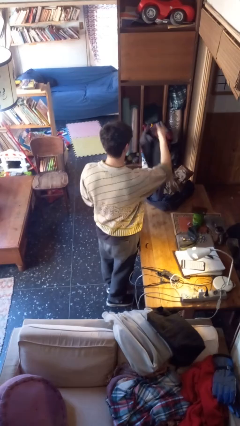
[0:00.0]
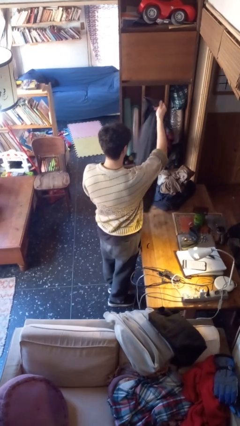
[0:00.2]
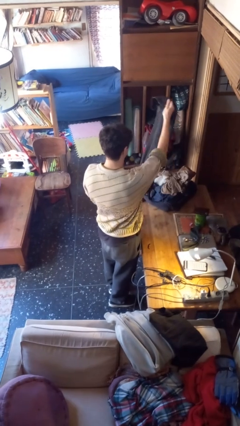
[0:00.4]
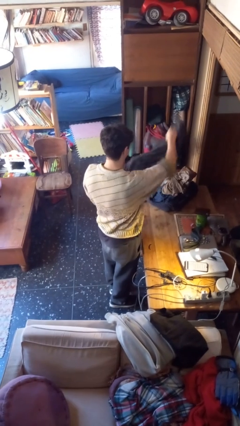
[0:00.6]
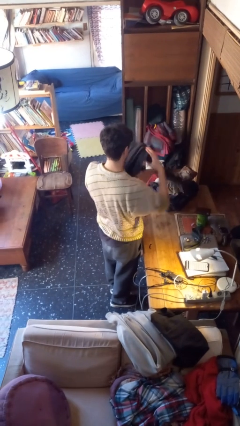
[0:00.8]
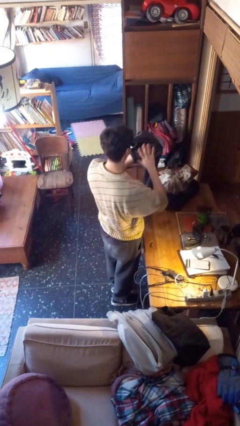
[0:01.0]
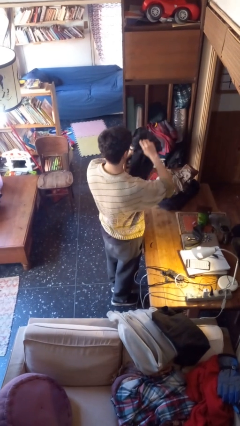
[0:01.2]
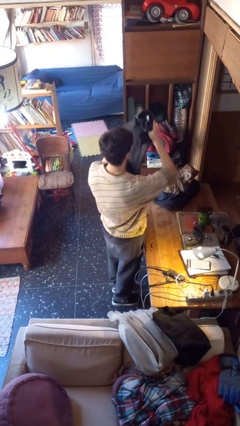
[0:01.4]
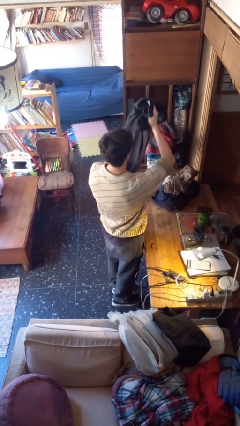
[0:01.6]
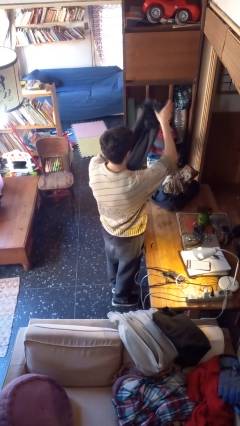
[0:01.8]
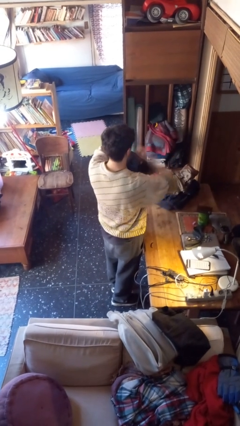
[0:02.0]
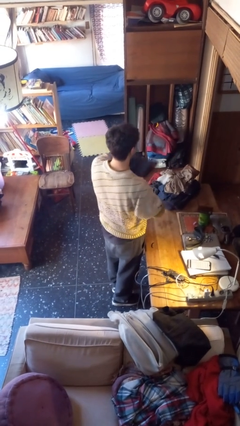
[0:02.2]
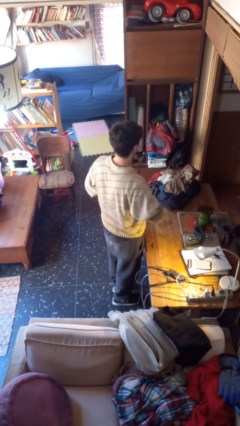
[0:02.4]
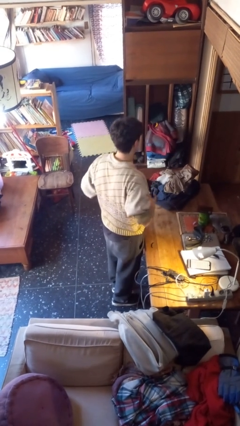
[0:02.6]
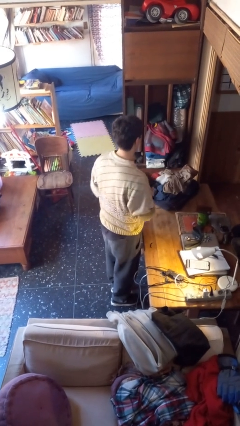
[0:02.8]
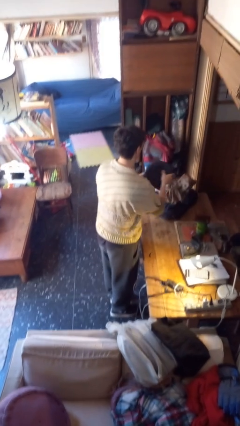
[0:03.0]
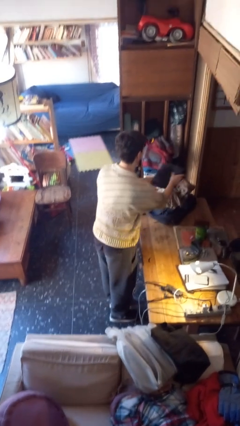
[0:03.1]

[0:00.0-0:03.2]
person folds pants

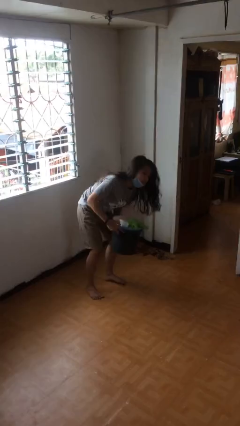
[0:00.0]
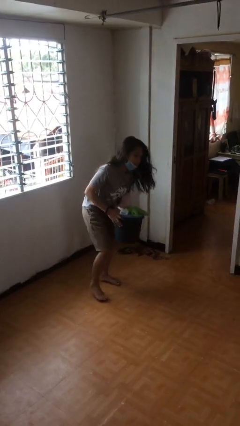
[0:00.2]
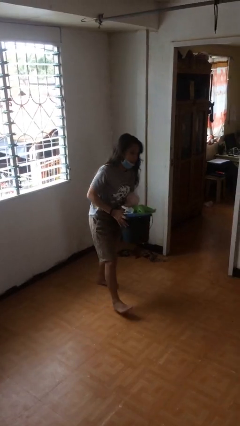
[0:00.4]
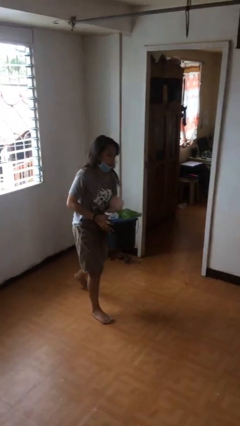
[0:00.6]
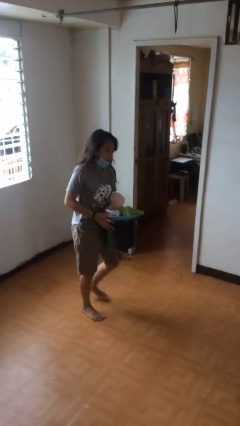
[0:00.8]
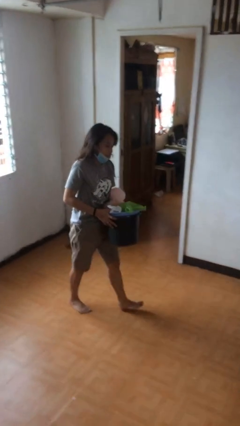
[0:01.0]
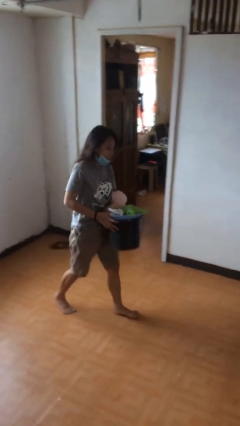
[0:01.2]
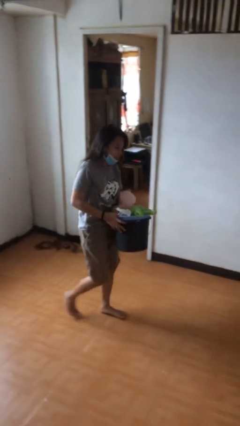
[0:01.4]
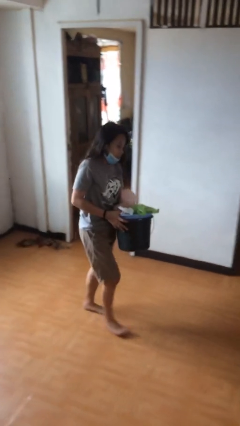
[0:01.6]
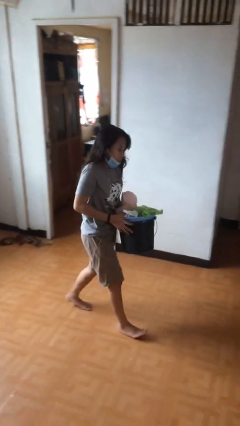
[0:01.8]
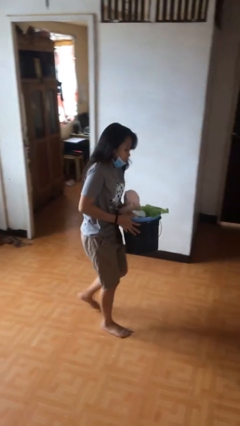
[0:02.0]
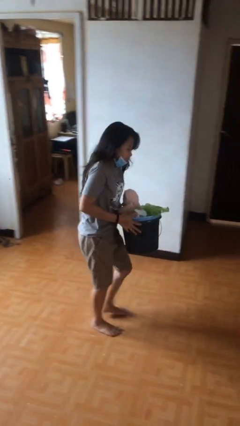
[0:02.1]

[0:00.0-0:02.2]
person carries heavy object

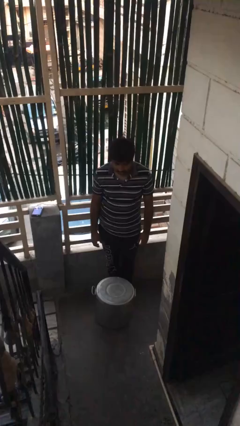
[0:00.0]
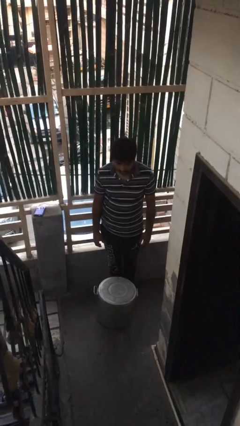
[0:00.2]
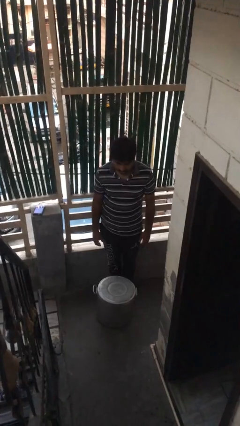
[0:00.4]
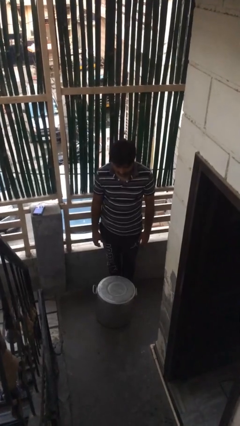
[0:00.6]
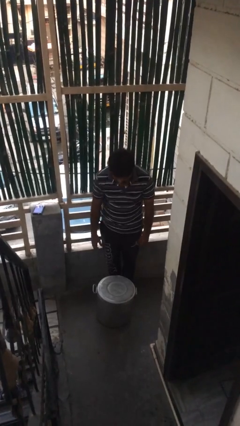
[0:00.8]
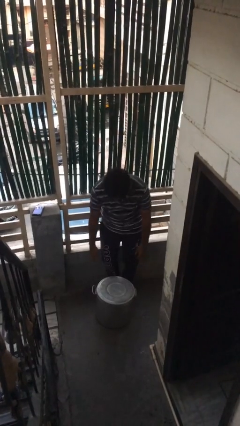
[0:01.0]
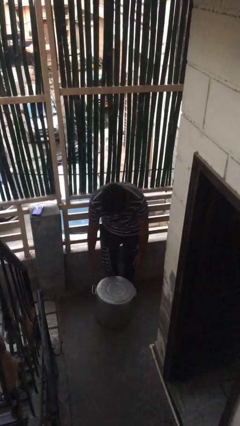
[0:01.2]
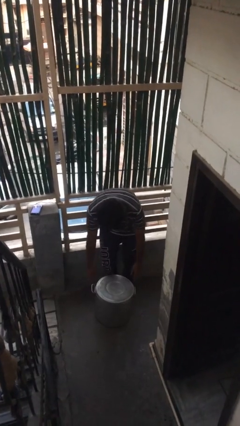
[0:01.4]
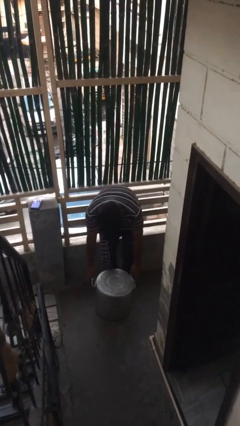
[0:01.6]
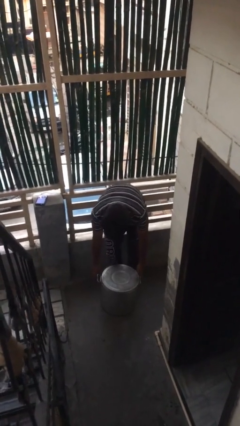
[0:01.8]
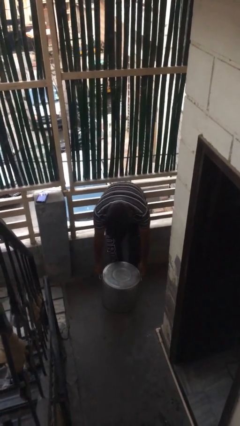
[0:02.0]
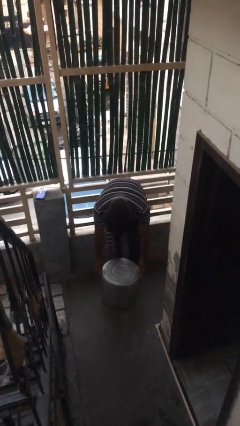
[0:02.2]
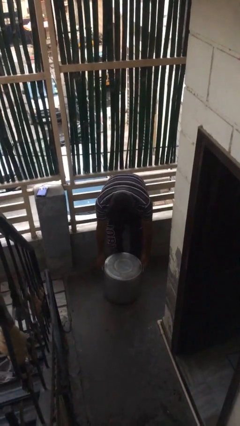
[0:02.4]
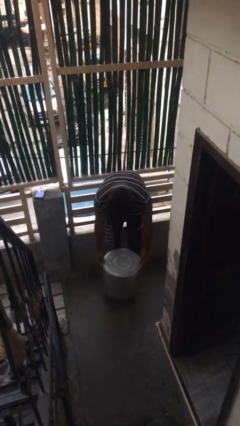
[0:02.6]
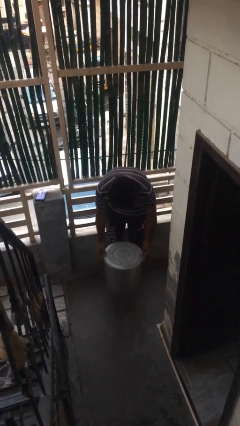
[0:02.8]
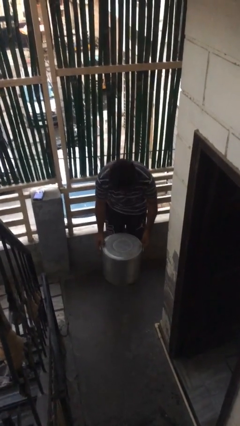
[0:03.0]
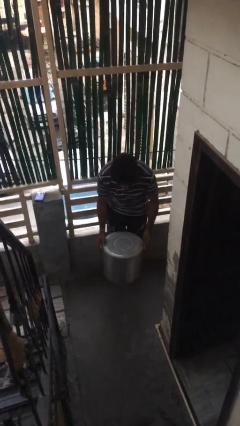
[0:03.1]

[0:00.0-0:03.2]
person picks up object from floor

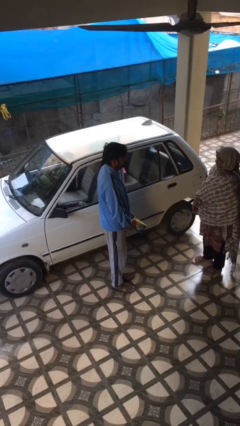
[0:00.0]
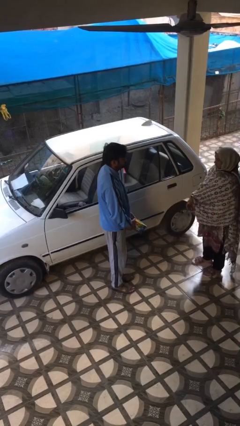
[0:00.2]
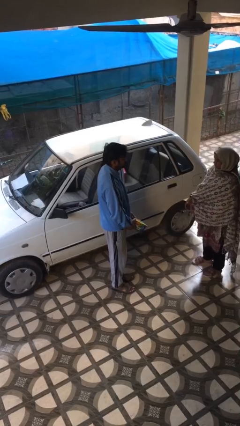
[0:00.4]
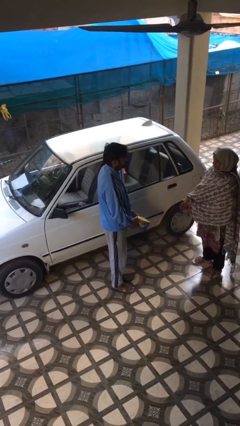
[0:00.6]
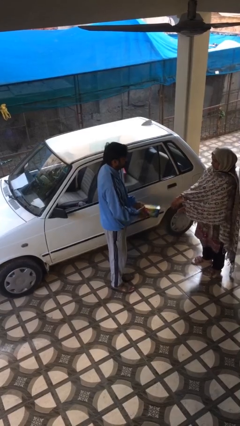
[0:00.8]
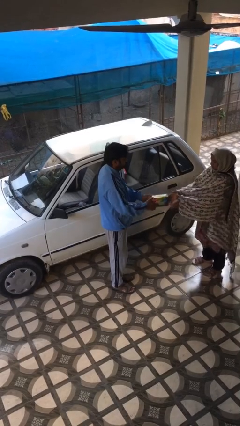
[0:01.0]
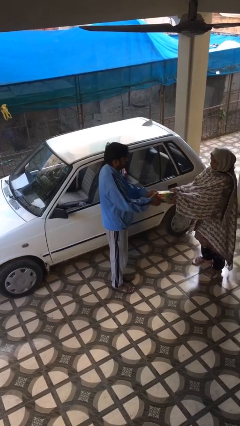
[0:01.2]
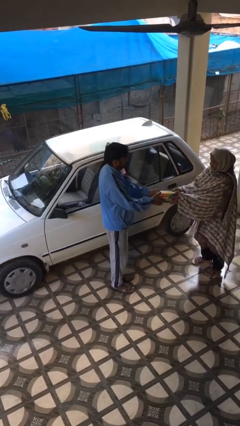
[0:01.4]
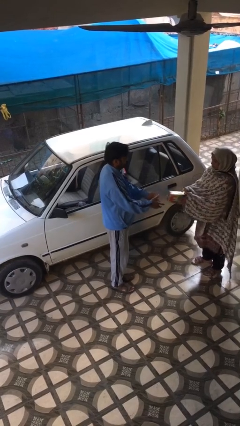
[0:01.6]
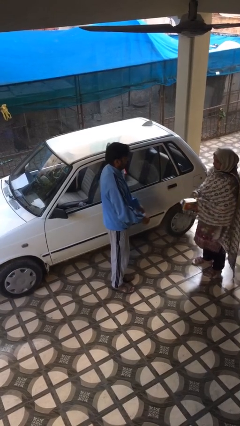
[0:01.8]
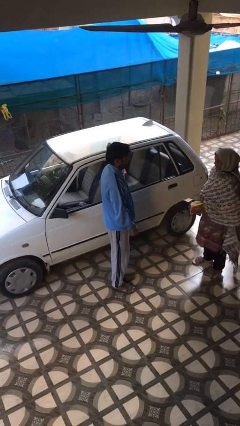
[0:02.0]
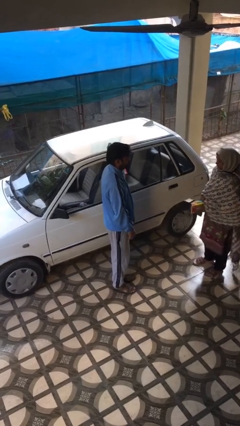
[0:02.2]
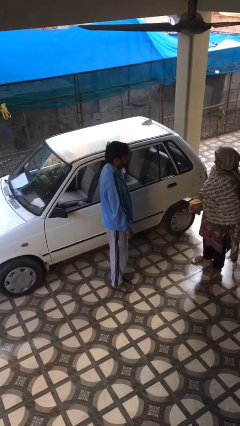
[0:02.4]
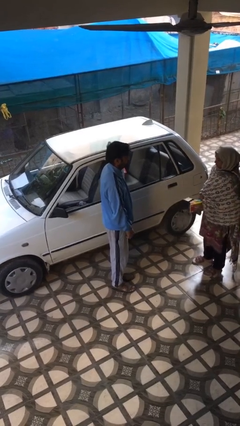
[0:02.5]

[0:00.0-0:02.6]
person transfers object to person

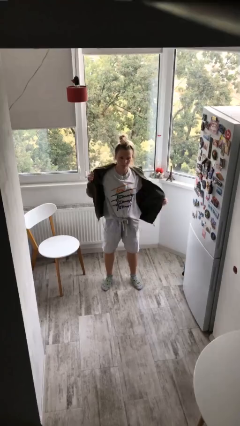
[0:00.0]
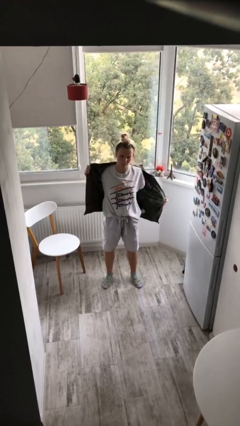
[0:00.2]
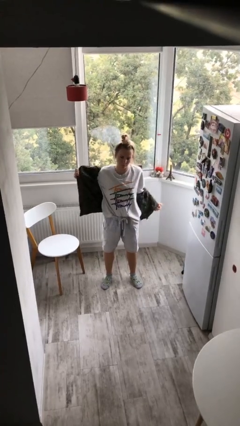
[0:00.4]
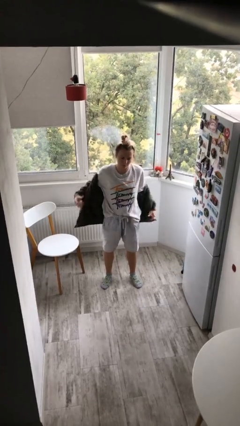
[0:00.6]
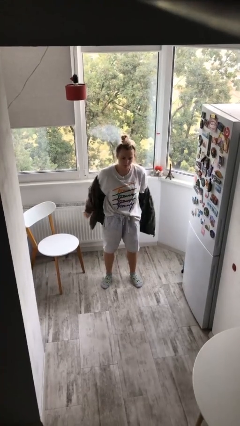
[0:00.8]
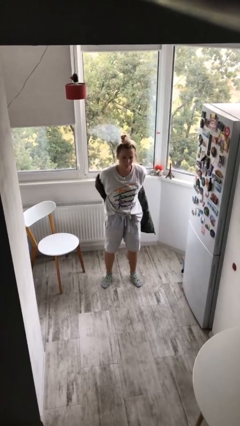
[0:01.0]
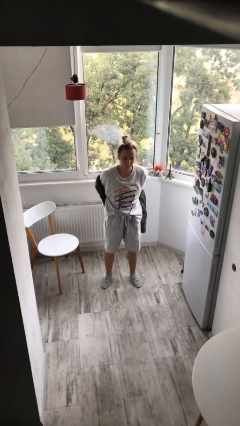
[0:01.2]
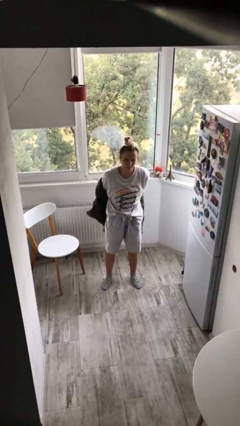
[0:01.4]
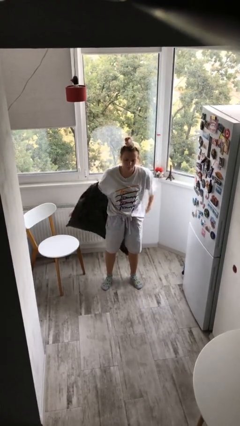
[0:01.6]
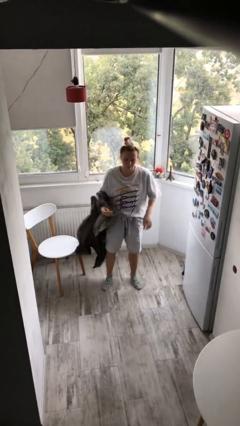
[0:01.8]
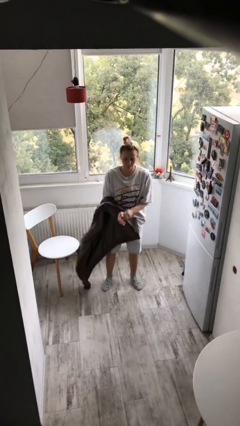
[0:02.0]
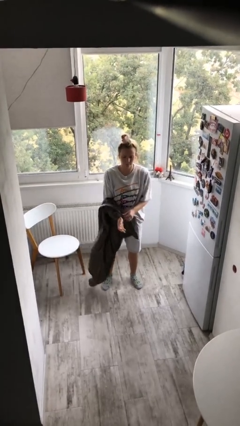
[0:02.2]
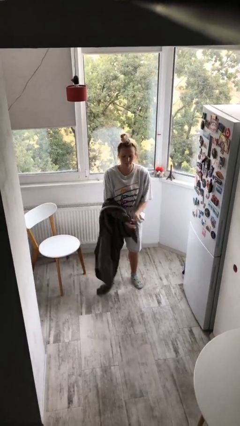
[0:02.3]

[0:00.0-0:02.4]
person takes off jacket

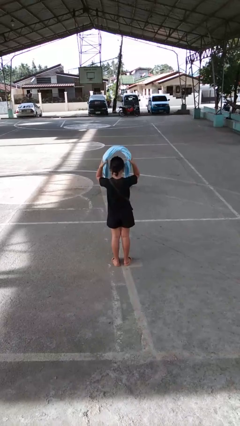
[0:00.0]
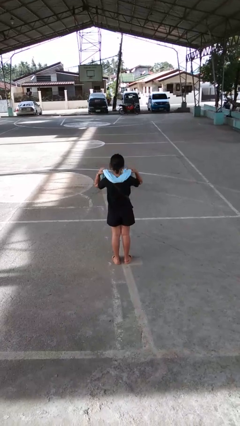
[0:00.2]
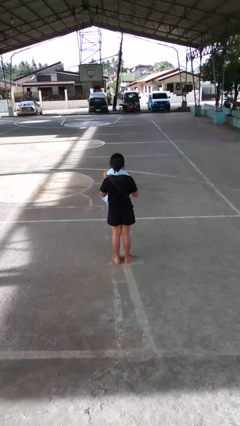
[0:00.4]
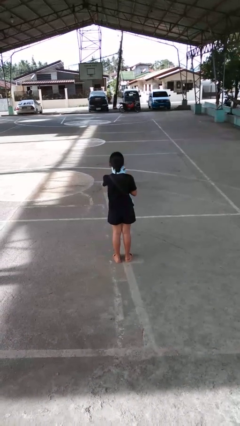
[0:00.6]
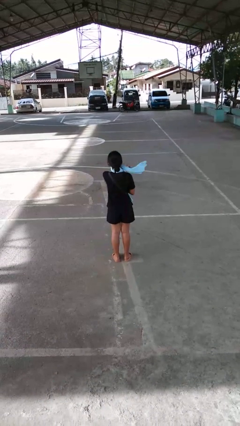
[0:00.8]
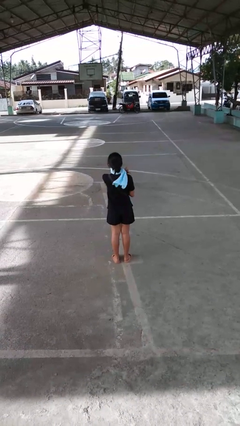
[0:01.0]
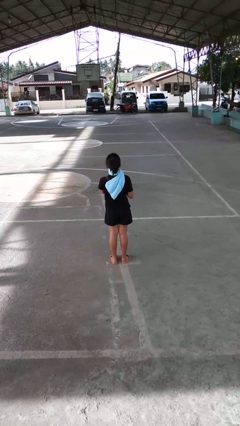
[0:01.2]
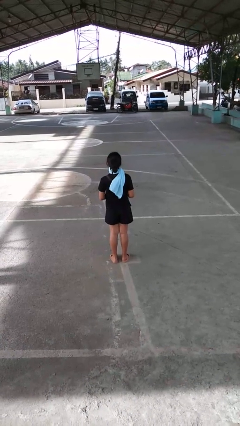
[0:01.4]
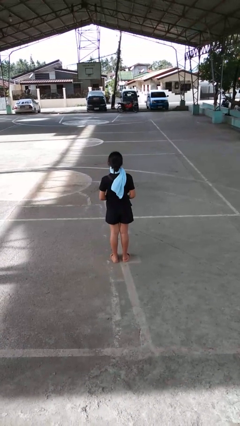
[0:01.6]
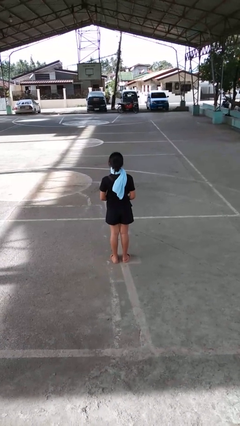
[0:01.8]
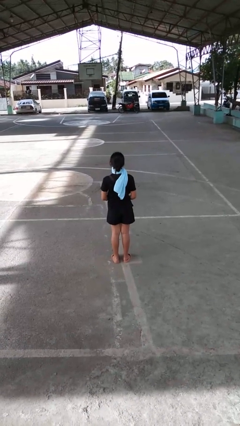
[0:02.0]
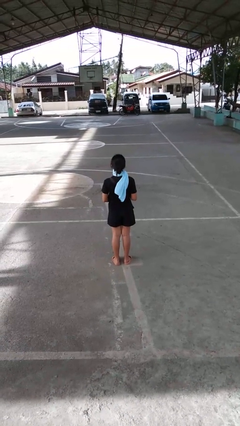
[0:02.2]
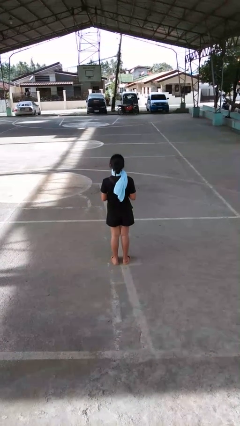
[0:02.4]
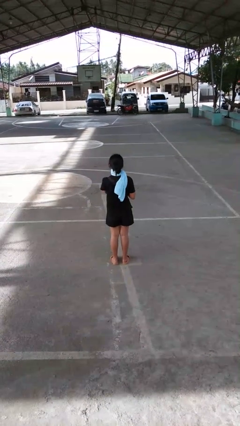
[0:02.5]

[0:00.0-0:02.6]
person puts on scarf

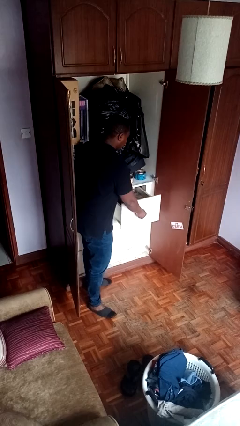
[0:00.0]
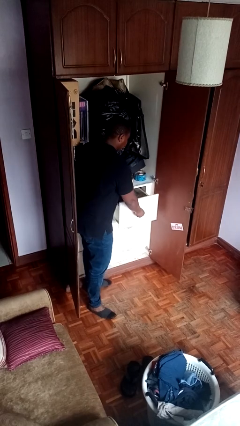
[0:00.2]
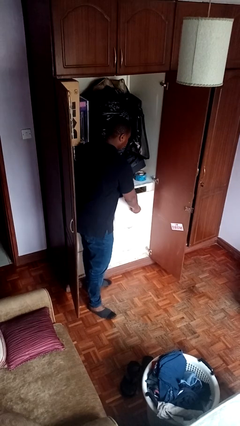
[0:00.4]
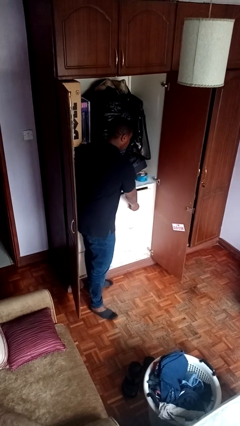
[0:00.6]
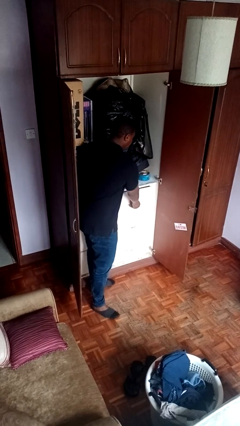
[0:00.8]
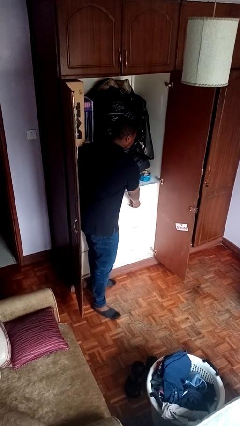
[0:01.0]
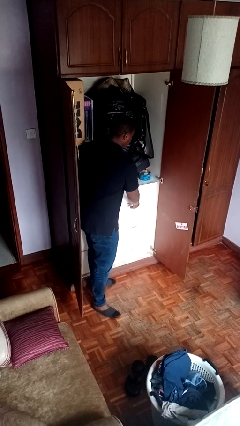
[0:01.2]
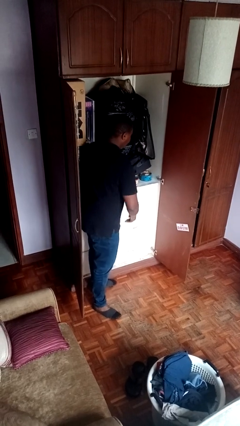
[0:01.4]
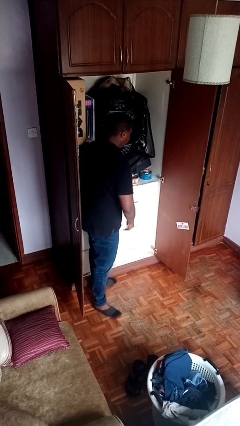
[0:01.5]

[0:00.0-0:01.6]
person closes dresser drawer
